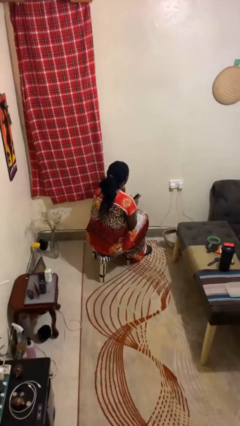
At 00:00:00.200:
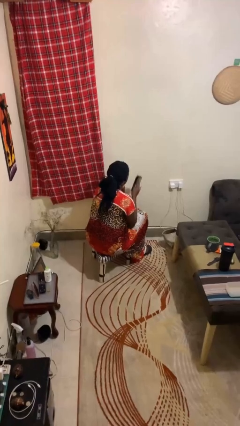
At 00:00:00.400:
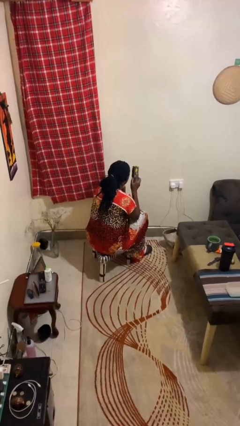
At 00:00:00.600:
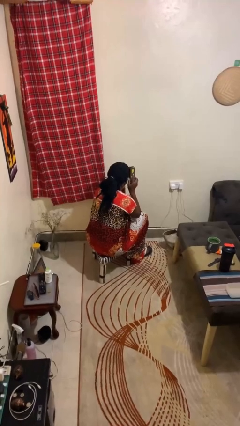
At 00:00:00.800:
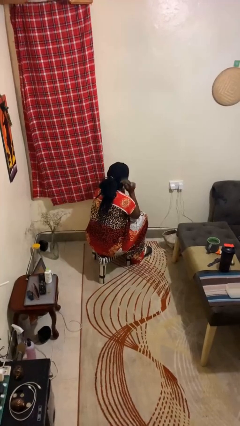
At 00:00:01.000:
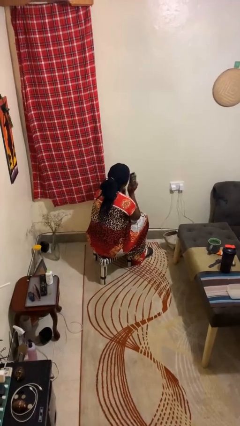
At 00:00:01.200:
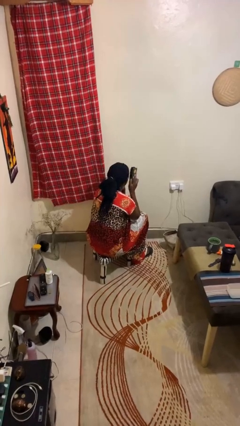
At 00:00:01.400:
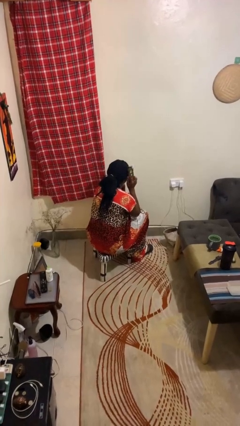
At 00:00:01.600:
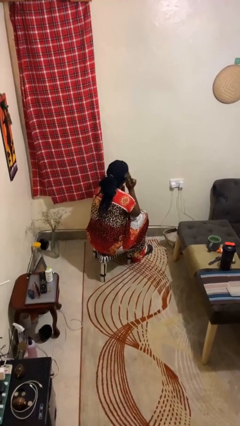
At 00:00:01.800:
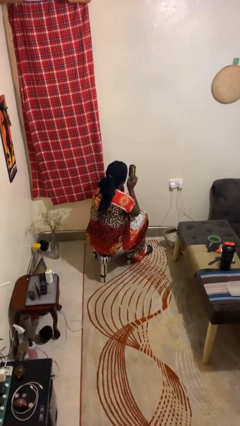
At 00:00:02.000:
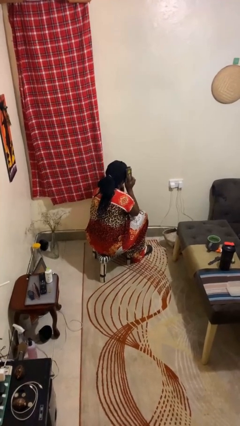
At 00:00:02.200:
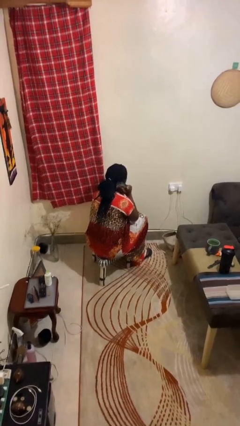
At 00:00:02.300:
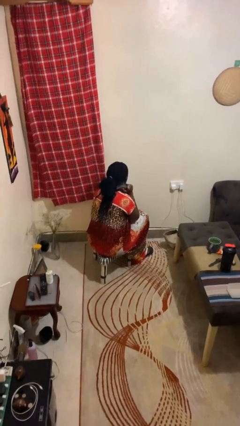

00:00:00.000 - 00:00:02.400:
person brushes hair

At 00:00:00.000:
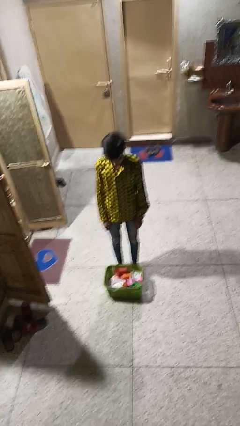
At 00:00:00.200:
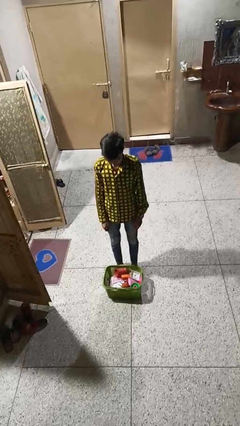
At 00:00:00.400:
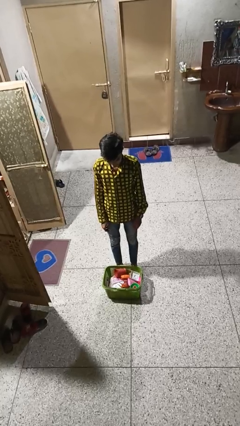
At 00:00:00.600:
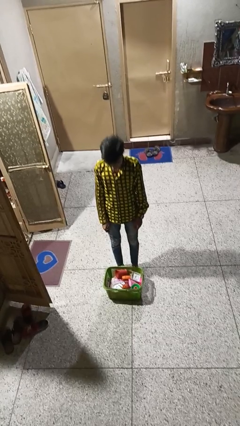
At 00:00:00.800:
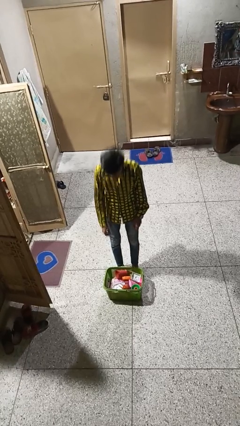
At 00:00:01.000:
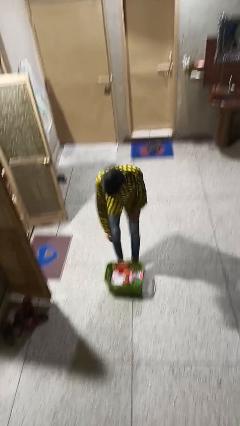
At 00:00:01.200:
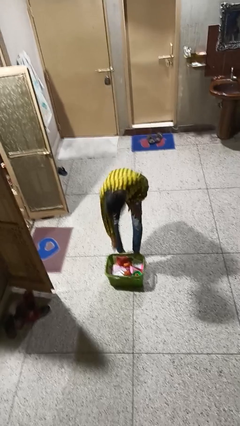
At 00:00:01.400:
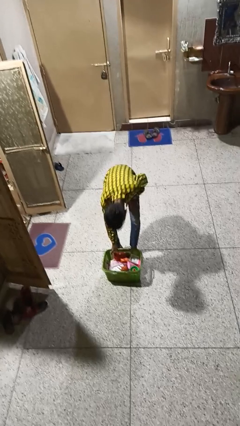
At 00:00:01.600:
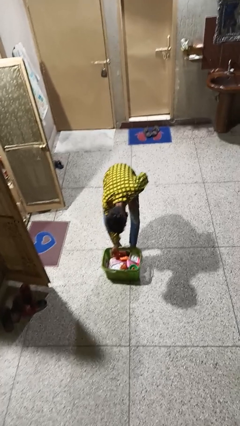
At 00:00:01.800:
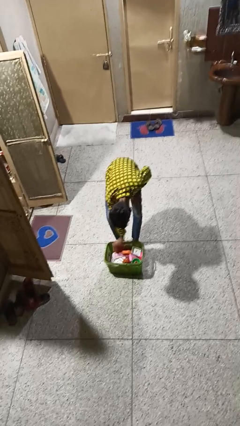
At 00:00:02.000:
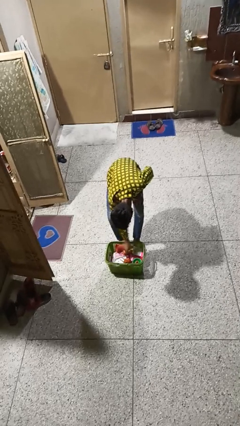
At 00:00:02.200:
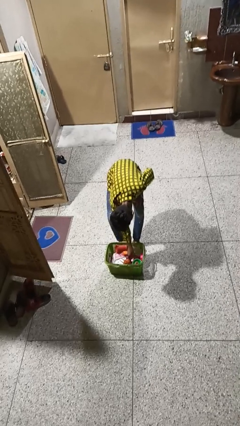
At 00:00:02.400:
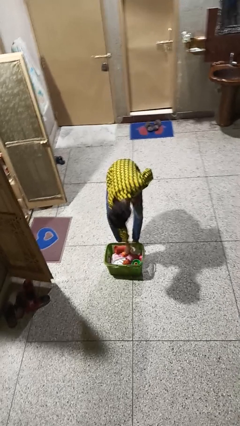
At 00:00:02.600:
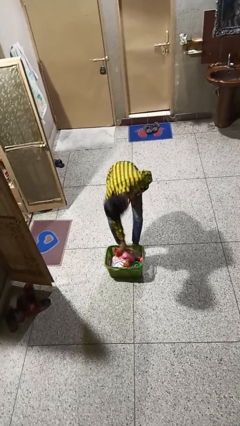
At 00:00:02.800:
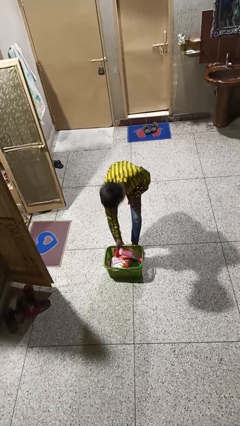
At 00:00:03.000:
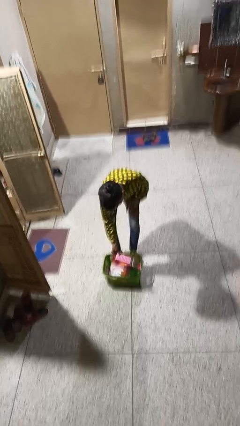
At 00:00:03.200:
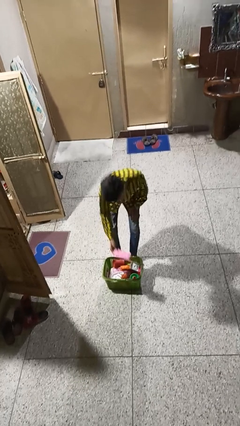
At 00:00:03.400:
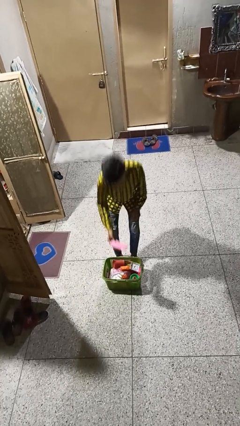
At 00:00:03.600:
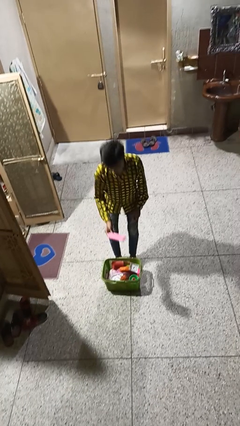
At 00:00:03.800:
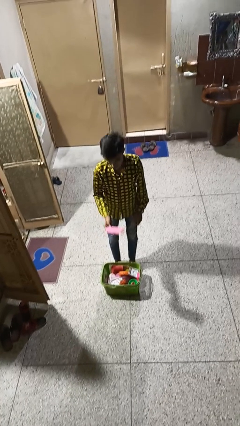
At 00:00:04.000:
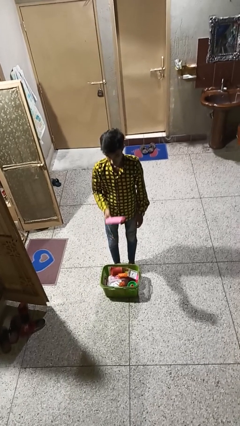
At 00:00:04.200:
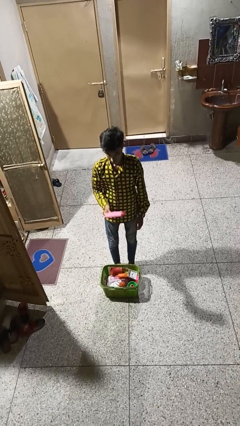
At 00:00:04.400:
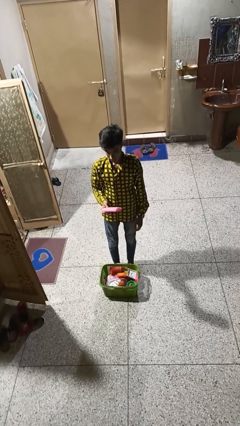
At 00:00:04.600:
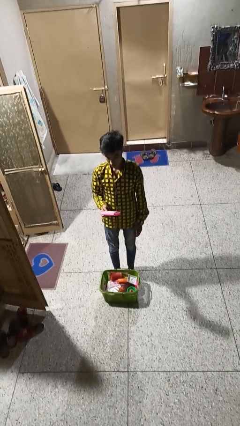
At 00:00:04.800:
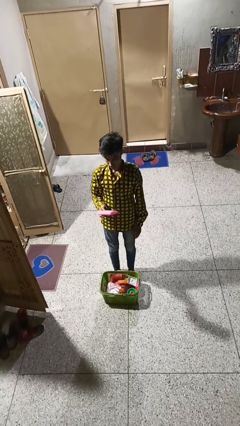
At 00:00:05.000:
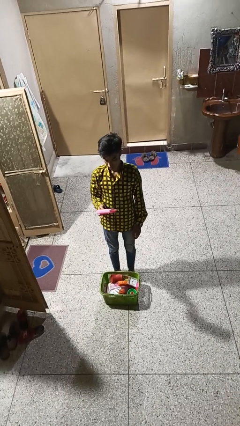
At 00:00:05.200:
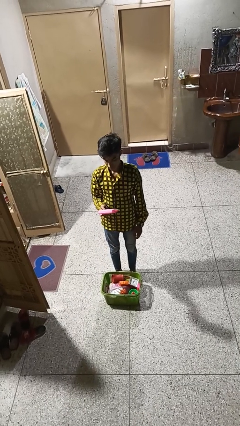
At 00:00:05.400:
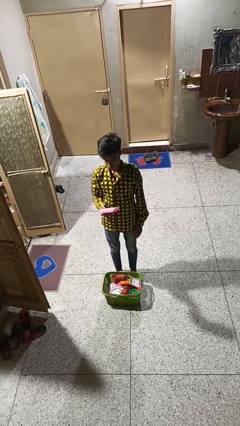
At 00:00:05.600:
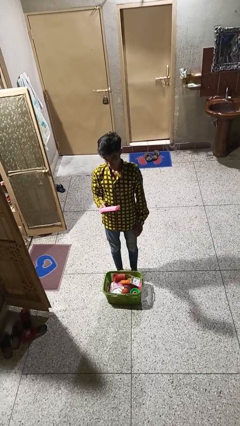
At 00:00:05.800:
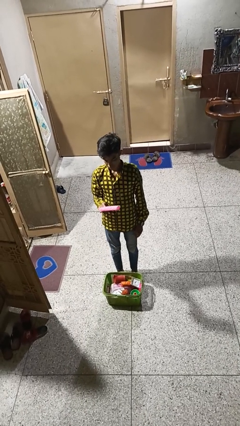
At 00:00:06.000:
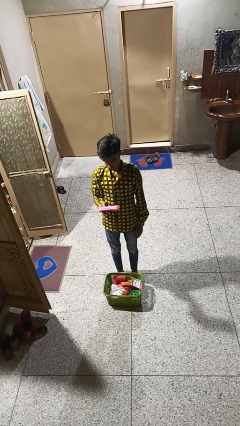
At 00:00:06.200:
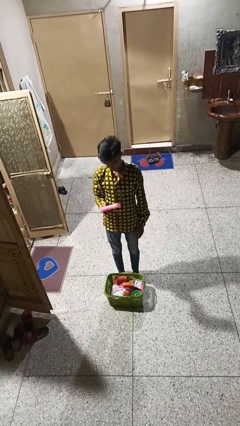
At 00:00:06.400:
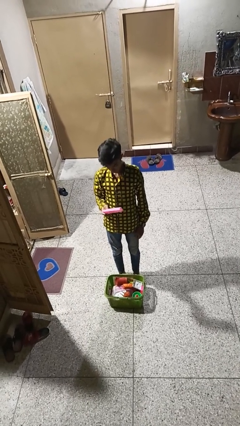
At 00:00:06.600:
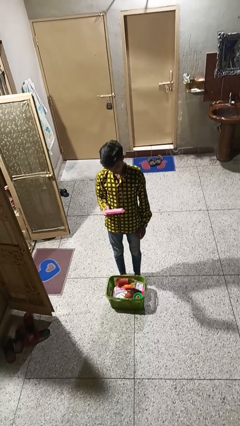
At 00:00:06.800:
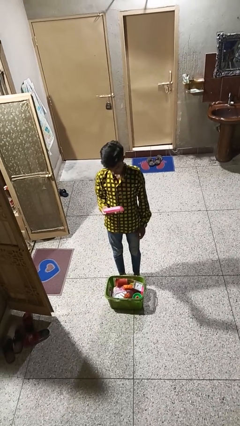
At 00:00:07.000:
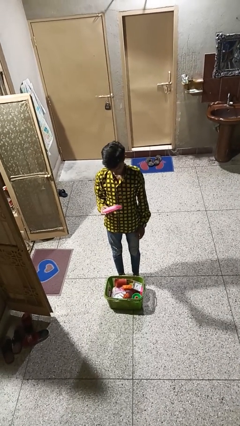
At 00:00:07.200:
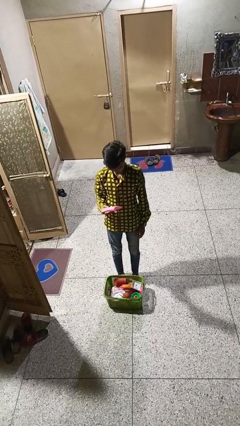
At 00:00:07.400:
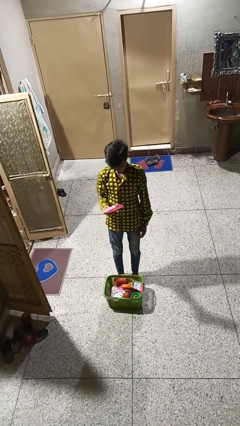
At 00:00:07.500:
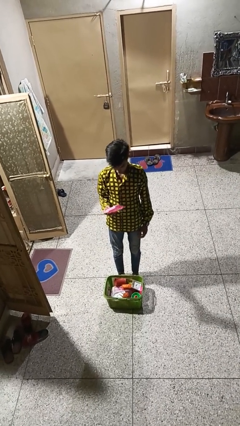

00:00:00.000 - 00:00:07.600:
person puts object into basket

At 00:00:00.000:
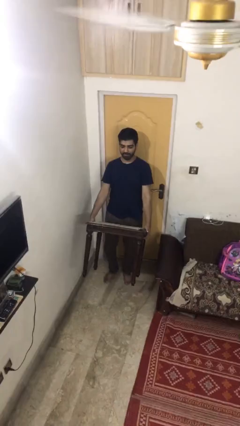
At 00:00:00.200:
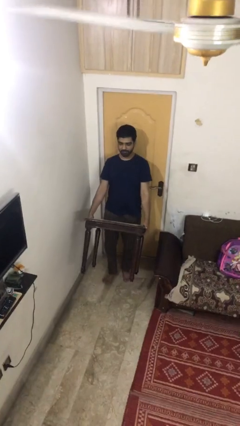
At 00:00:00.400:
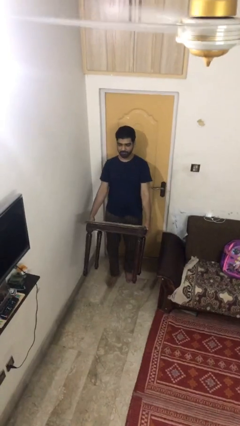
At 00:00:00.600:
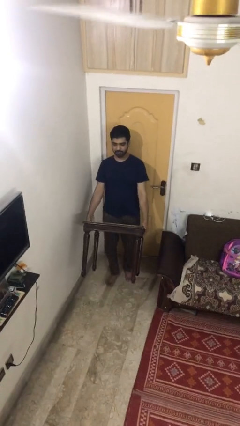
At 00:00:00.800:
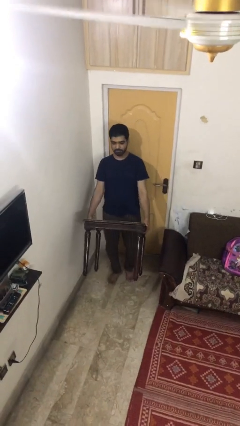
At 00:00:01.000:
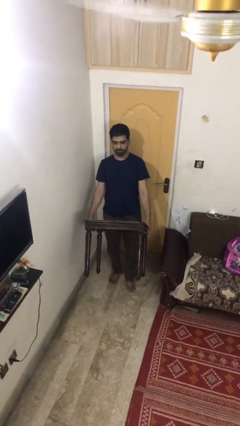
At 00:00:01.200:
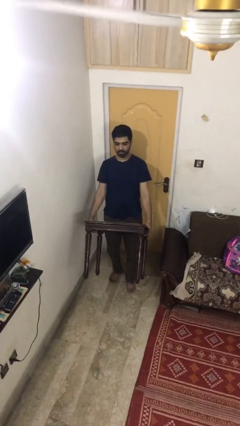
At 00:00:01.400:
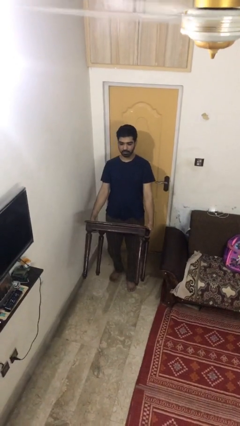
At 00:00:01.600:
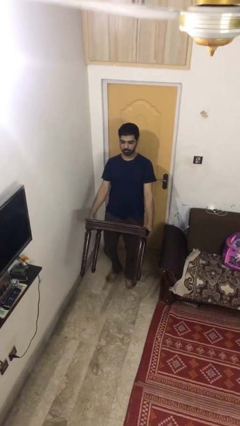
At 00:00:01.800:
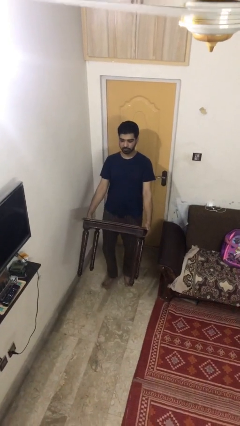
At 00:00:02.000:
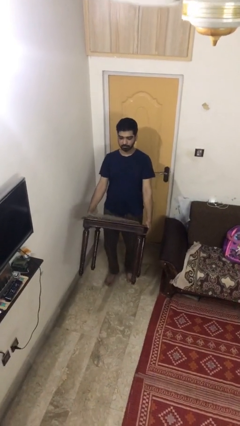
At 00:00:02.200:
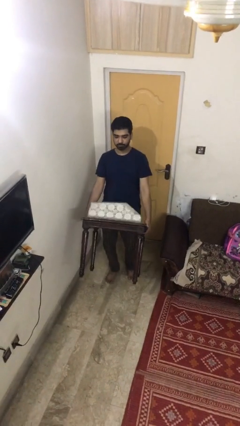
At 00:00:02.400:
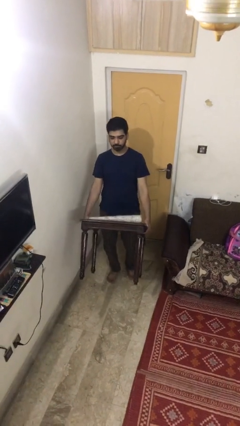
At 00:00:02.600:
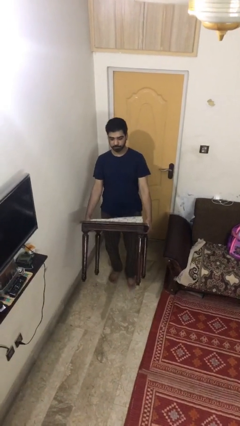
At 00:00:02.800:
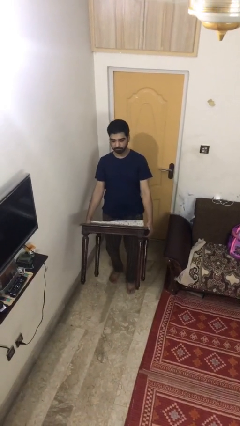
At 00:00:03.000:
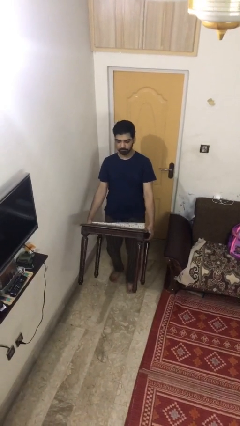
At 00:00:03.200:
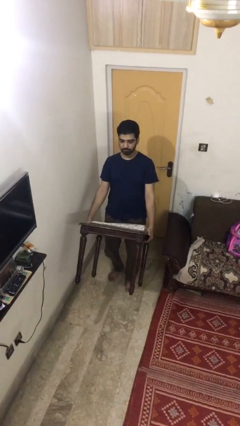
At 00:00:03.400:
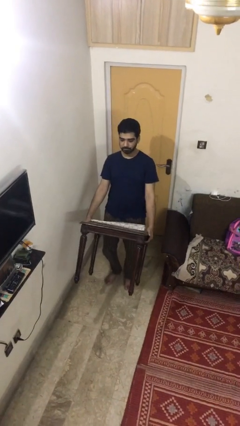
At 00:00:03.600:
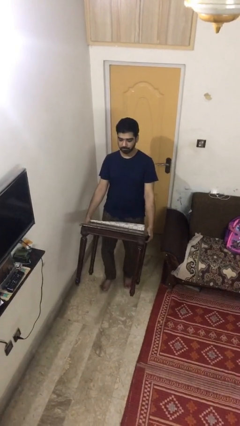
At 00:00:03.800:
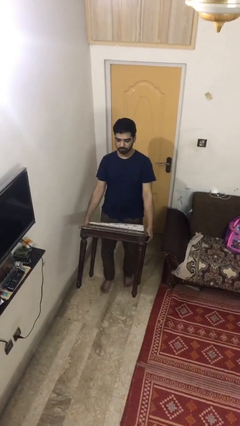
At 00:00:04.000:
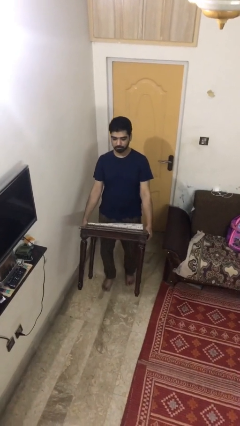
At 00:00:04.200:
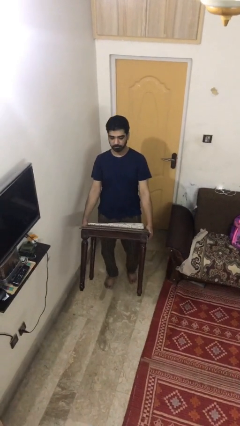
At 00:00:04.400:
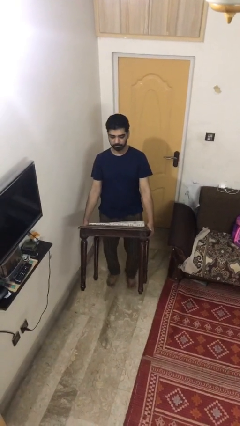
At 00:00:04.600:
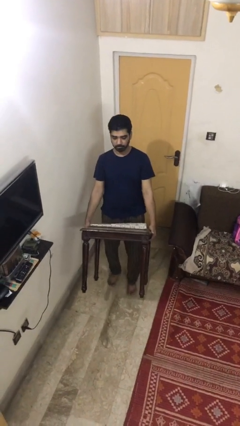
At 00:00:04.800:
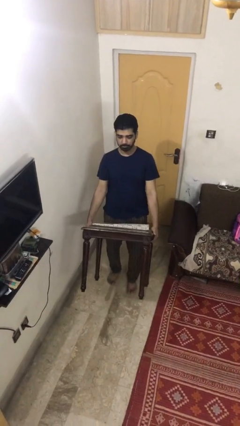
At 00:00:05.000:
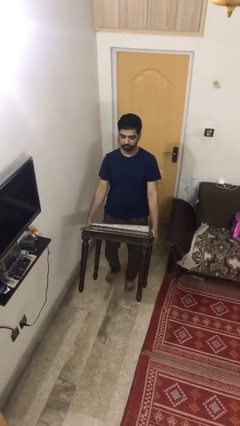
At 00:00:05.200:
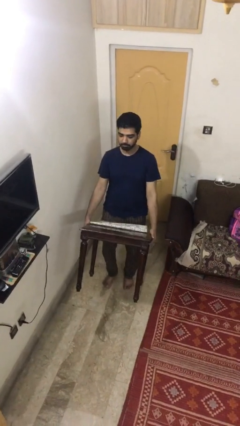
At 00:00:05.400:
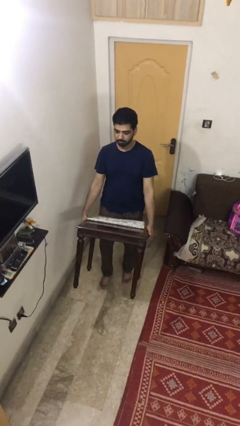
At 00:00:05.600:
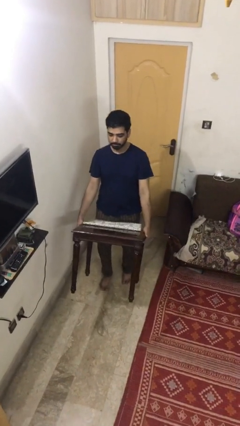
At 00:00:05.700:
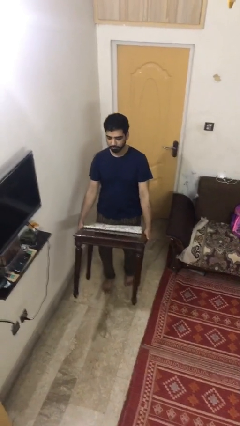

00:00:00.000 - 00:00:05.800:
person carries heavy object

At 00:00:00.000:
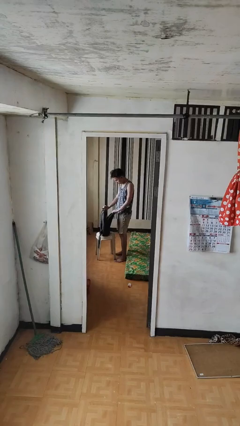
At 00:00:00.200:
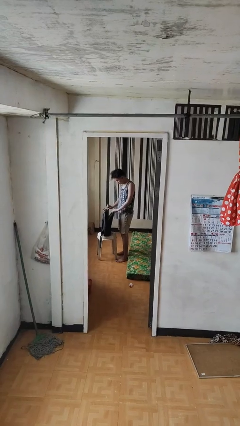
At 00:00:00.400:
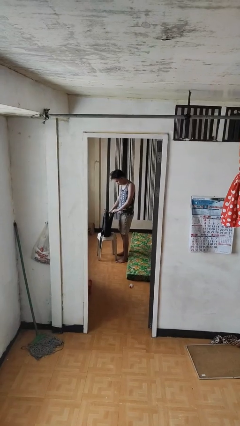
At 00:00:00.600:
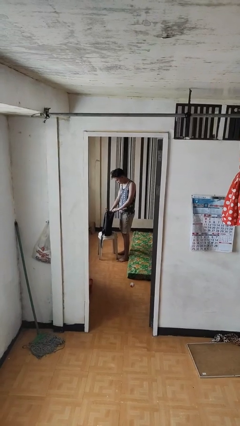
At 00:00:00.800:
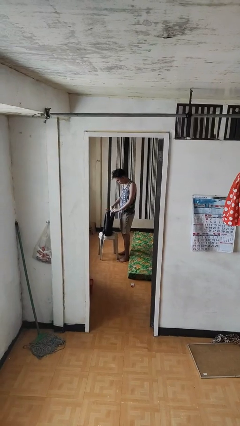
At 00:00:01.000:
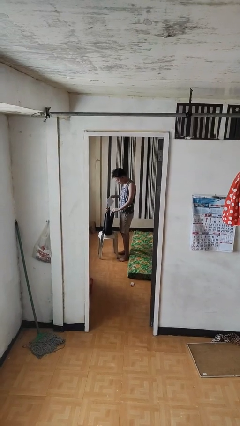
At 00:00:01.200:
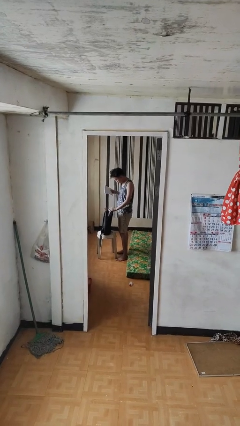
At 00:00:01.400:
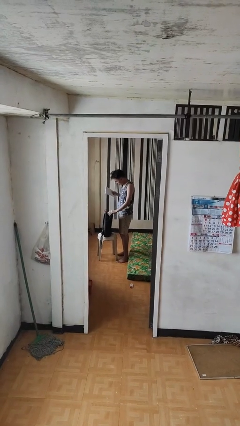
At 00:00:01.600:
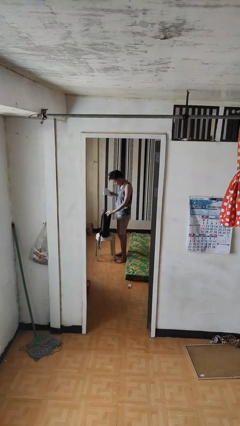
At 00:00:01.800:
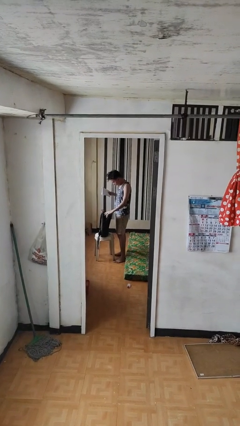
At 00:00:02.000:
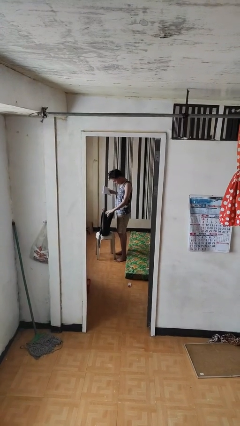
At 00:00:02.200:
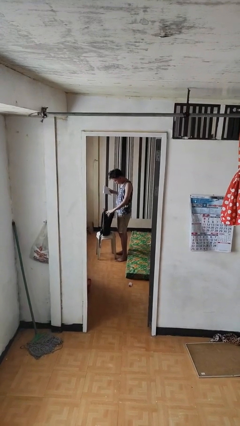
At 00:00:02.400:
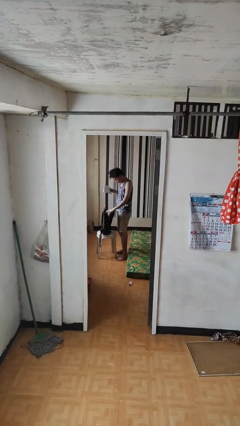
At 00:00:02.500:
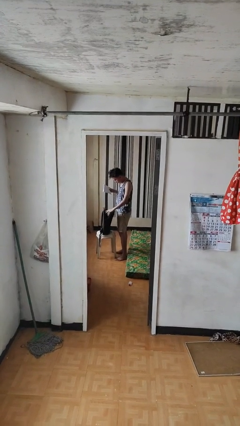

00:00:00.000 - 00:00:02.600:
person takes object from backpack
